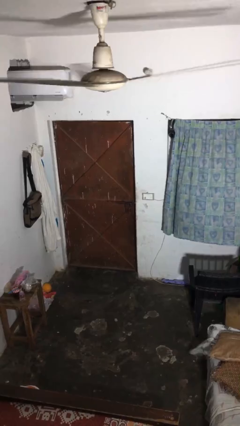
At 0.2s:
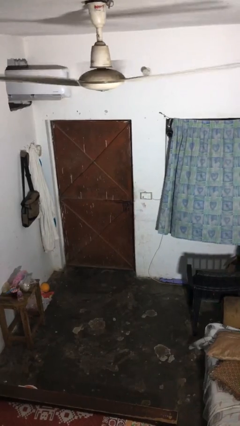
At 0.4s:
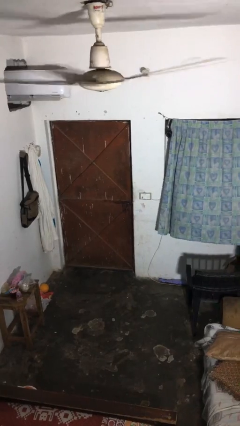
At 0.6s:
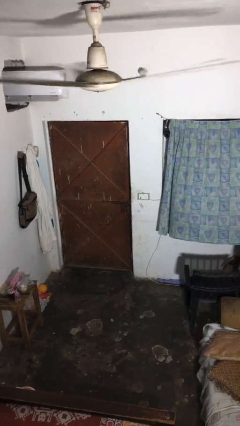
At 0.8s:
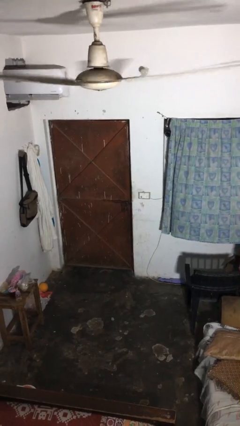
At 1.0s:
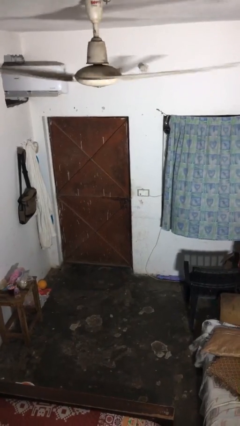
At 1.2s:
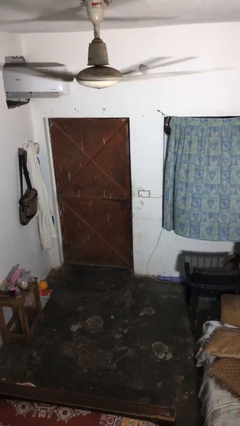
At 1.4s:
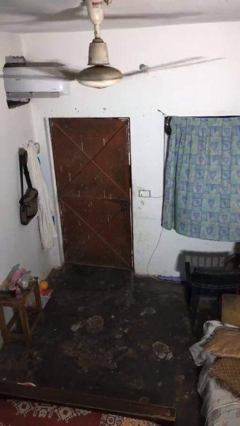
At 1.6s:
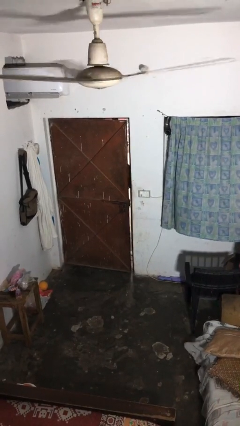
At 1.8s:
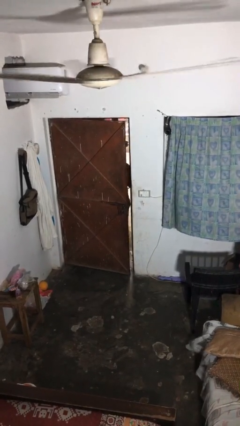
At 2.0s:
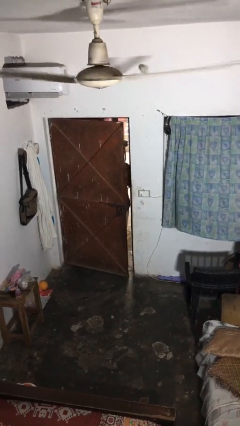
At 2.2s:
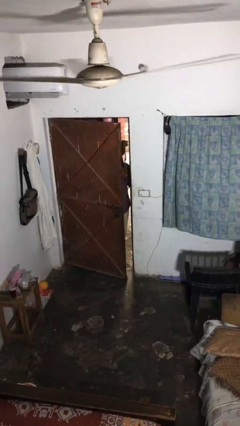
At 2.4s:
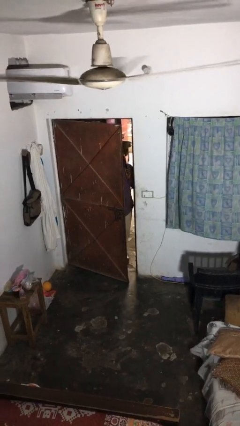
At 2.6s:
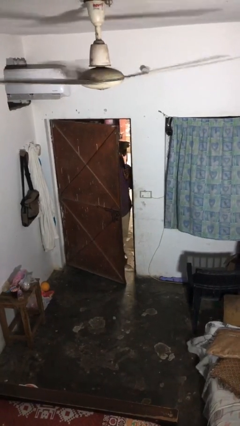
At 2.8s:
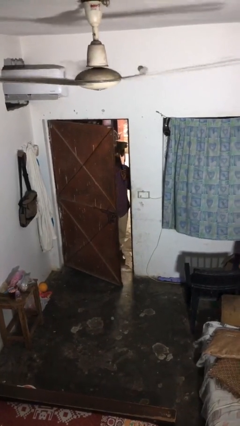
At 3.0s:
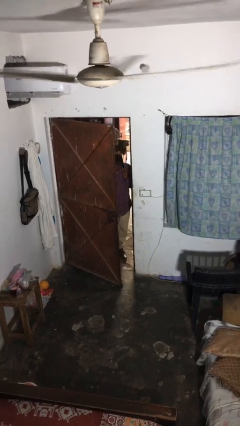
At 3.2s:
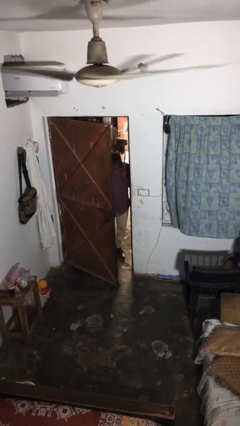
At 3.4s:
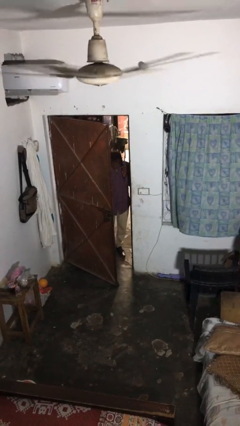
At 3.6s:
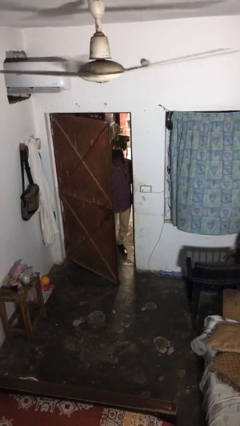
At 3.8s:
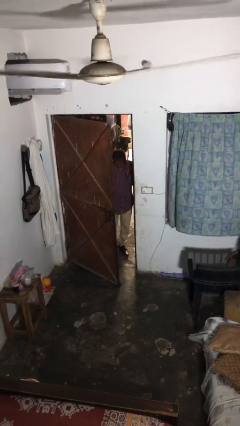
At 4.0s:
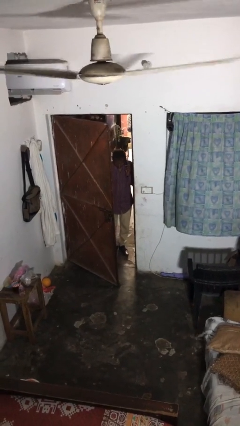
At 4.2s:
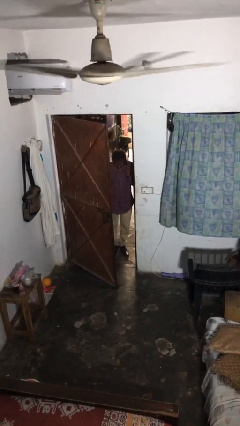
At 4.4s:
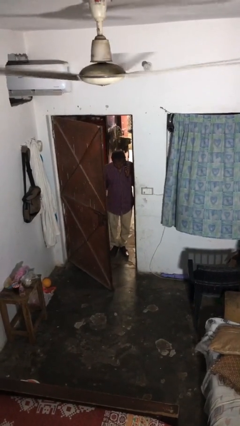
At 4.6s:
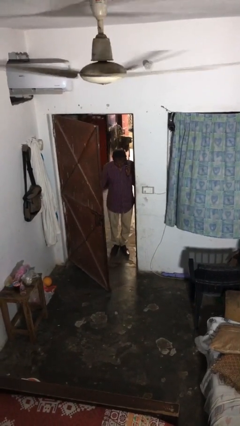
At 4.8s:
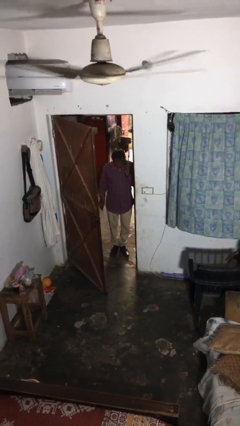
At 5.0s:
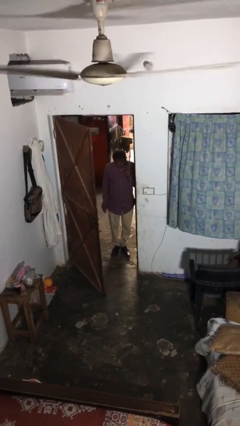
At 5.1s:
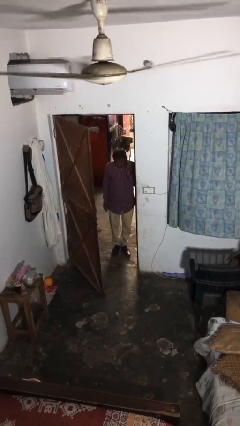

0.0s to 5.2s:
person opens facility door

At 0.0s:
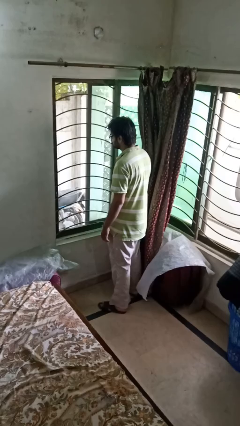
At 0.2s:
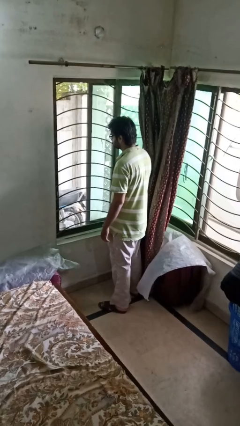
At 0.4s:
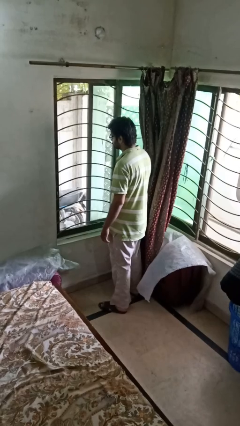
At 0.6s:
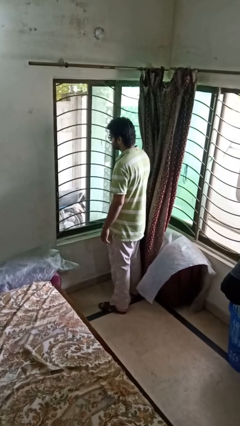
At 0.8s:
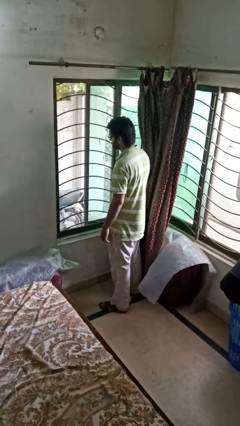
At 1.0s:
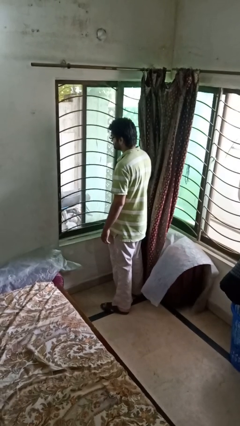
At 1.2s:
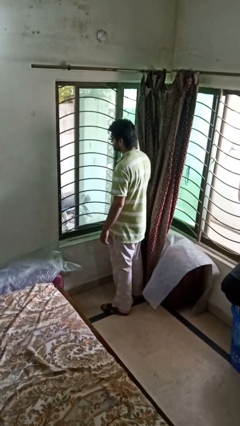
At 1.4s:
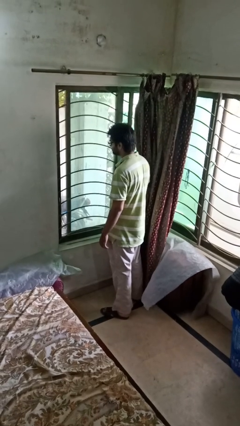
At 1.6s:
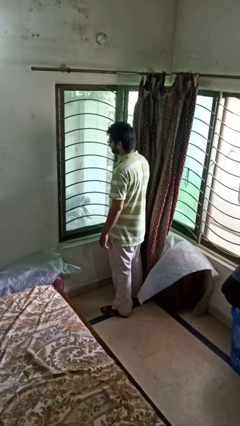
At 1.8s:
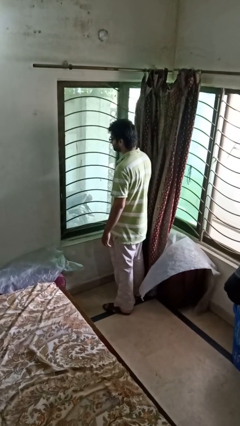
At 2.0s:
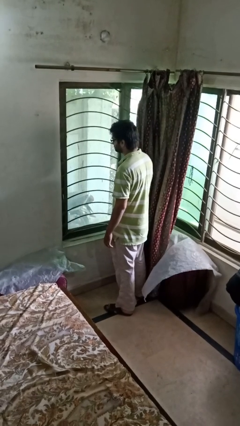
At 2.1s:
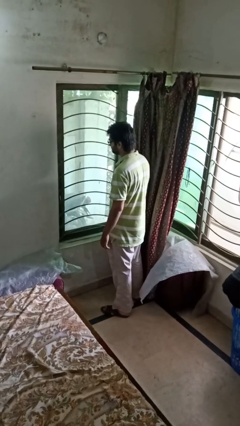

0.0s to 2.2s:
person closes home window

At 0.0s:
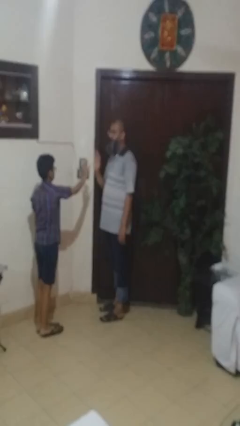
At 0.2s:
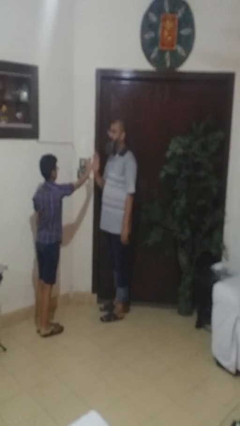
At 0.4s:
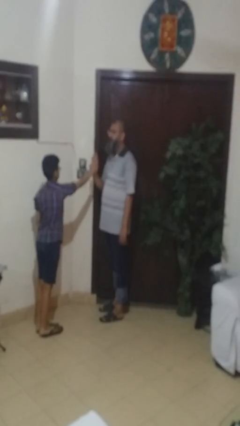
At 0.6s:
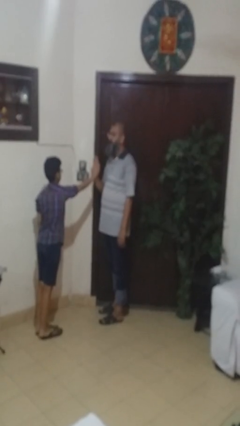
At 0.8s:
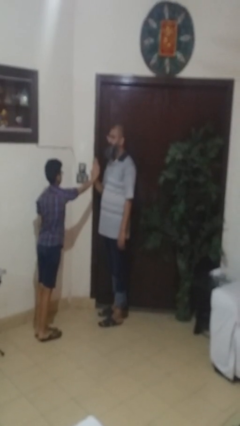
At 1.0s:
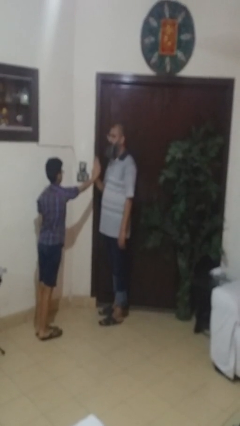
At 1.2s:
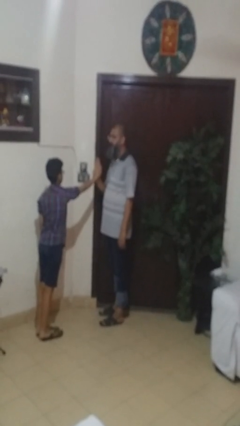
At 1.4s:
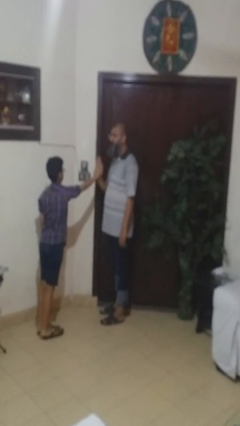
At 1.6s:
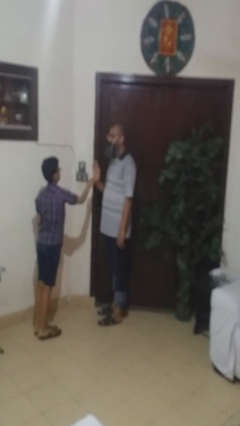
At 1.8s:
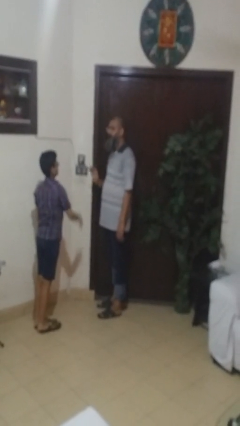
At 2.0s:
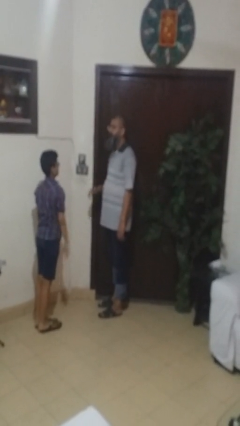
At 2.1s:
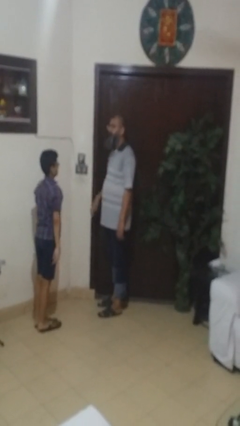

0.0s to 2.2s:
person highfives hand

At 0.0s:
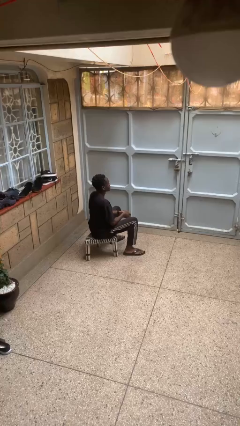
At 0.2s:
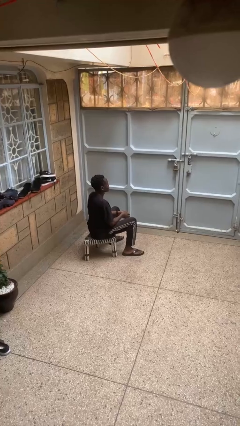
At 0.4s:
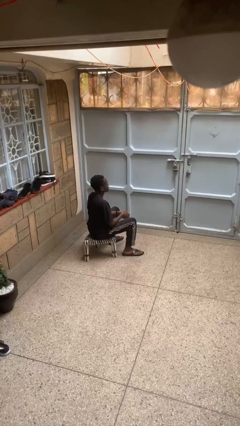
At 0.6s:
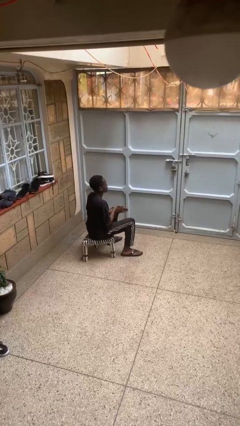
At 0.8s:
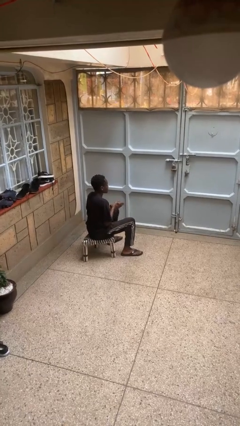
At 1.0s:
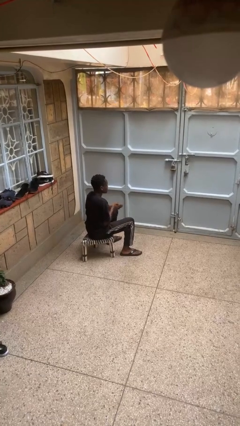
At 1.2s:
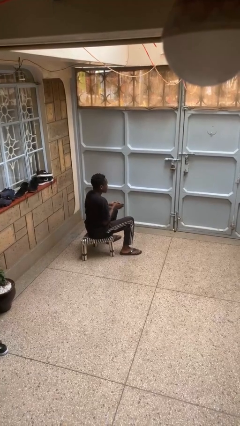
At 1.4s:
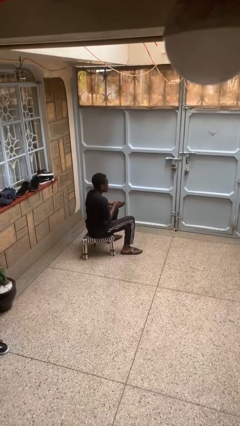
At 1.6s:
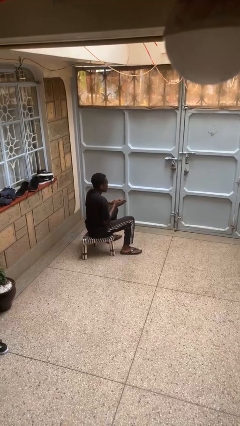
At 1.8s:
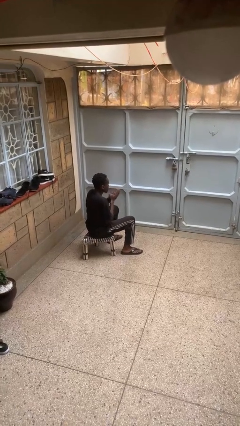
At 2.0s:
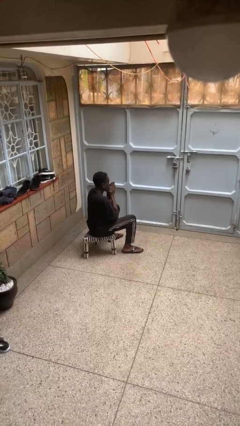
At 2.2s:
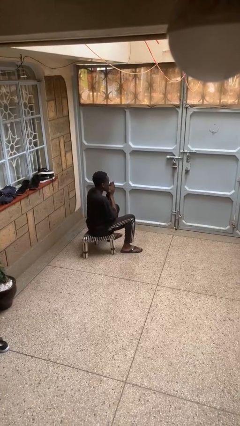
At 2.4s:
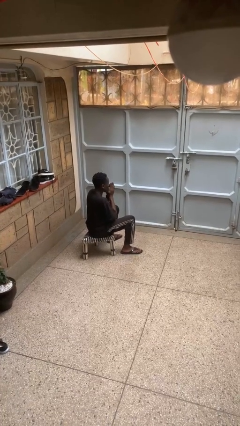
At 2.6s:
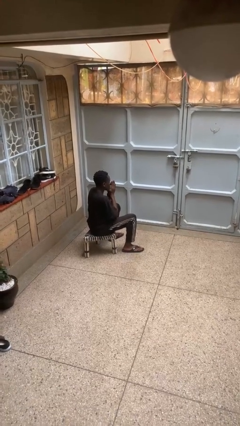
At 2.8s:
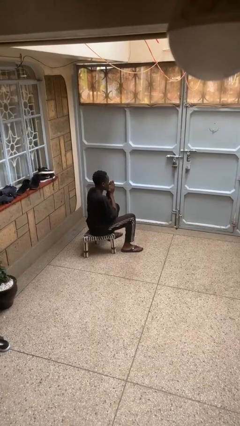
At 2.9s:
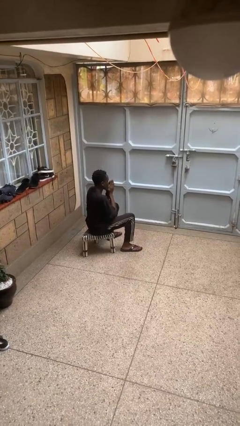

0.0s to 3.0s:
person blows into hands

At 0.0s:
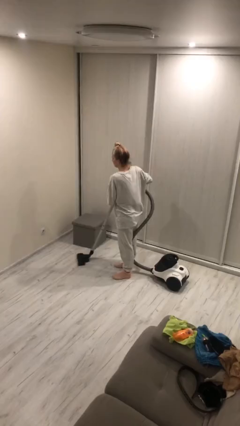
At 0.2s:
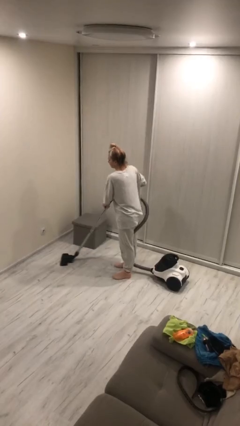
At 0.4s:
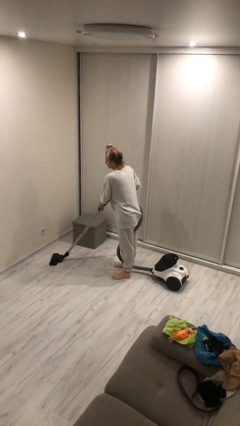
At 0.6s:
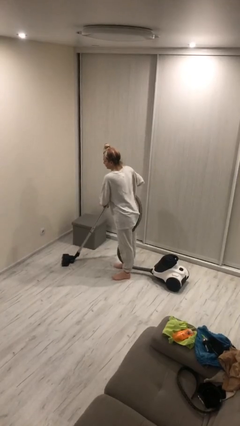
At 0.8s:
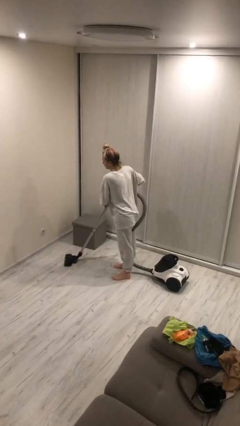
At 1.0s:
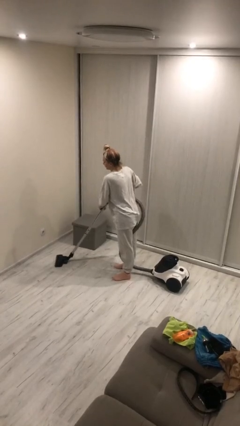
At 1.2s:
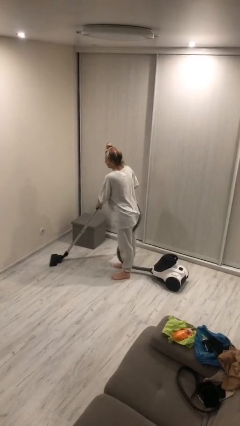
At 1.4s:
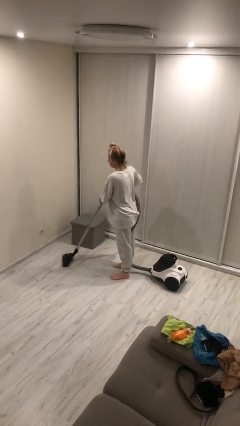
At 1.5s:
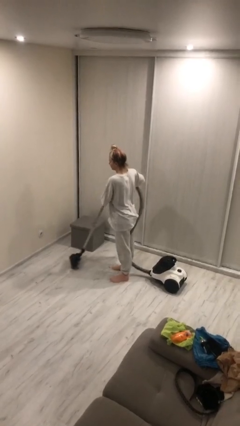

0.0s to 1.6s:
person vacuums carpet

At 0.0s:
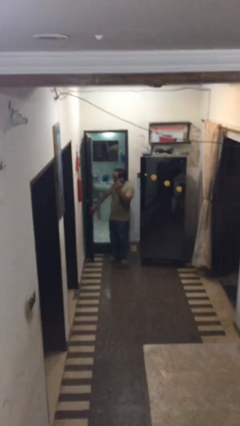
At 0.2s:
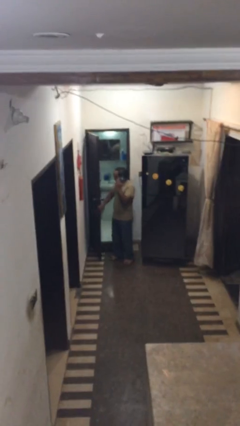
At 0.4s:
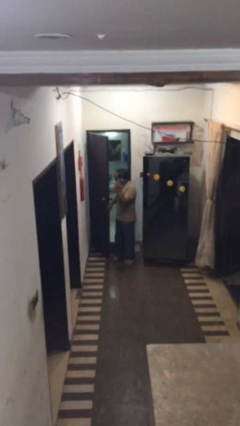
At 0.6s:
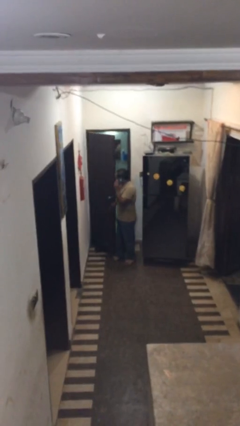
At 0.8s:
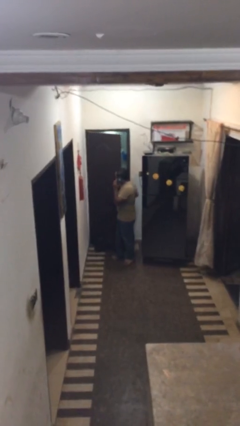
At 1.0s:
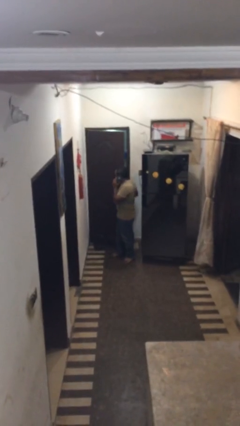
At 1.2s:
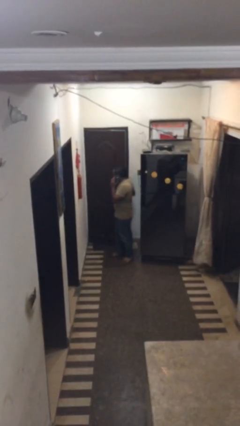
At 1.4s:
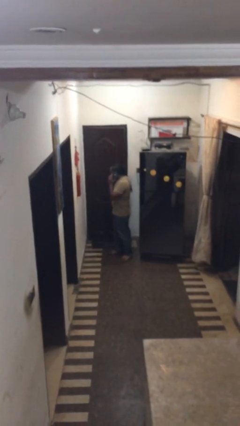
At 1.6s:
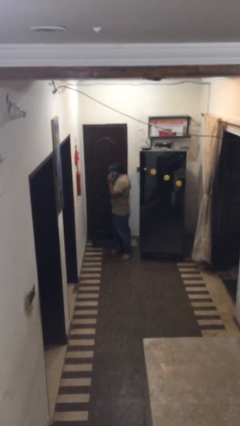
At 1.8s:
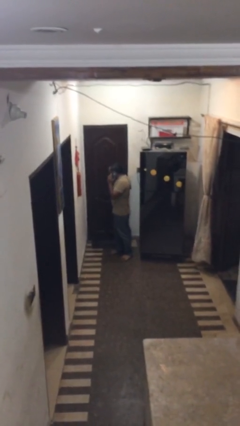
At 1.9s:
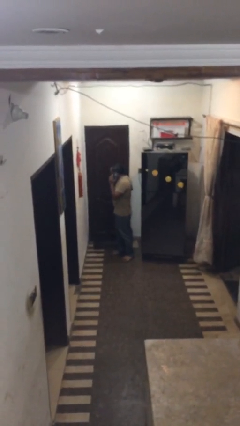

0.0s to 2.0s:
person closes facility door

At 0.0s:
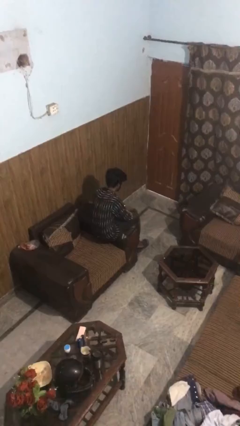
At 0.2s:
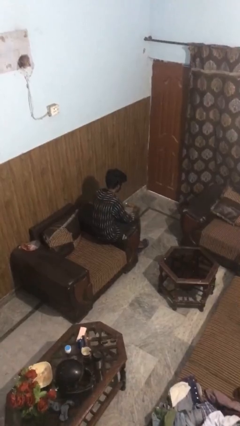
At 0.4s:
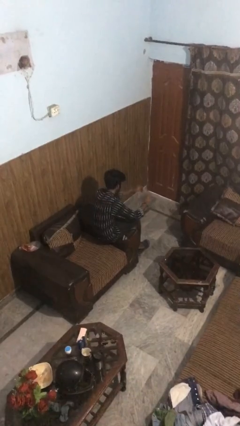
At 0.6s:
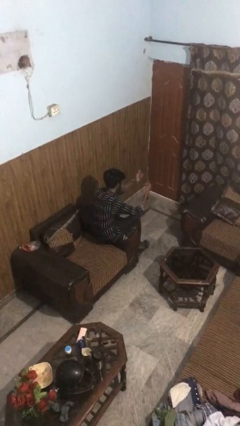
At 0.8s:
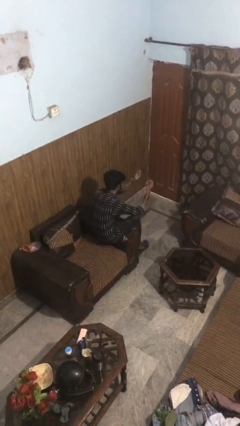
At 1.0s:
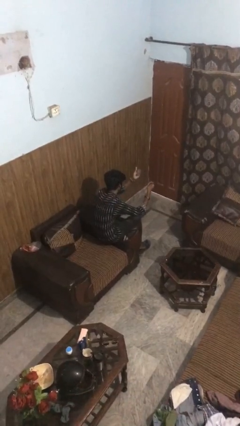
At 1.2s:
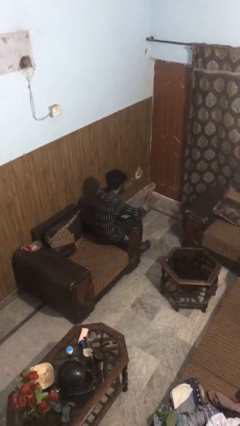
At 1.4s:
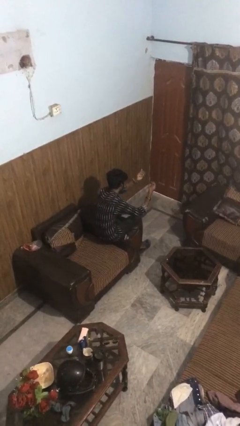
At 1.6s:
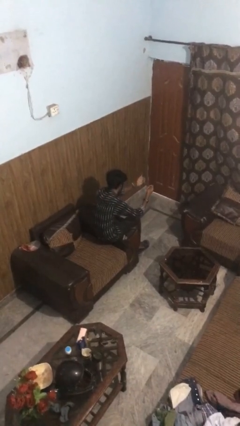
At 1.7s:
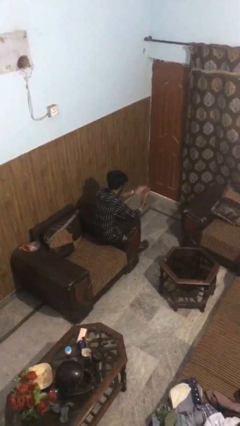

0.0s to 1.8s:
person snaps fingers
